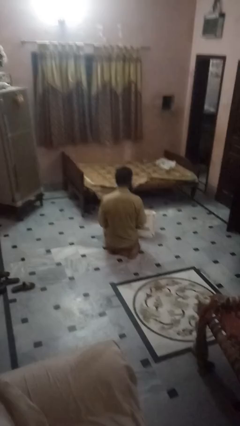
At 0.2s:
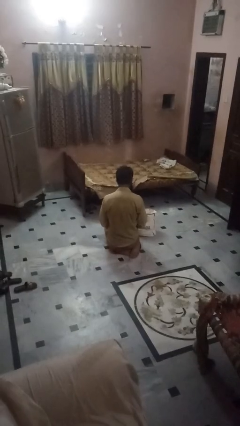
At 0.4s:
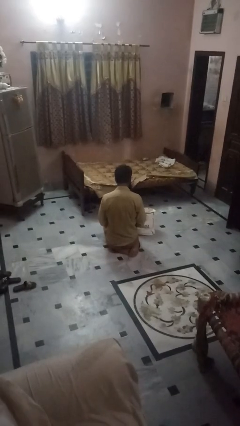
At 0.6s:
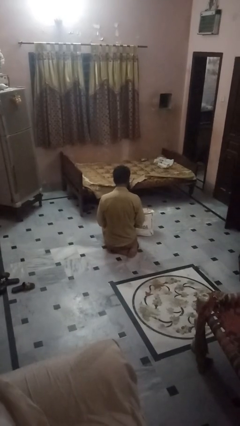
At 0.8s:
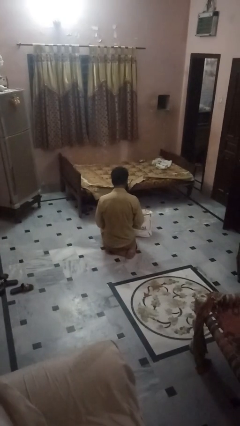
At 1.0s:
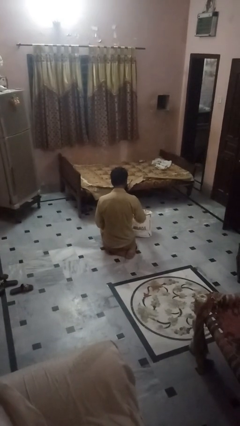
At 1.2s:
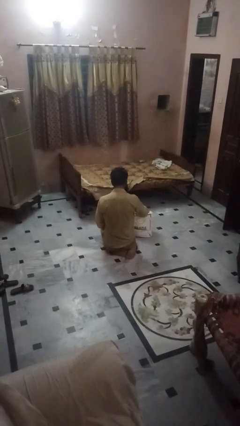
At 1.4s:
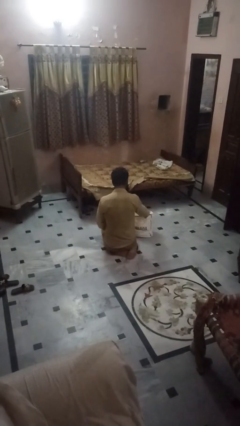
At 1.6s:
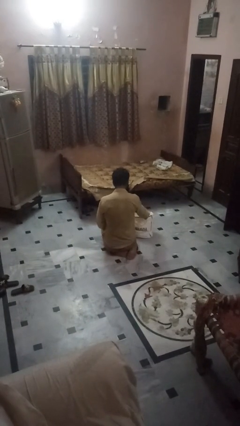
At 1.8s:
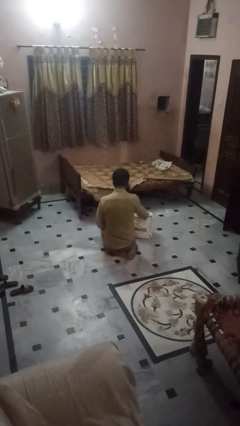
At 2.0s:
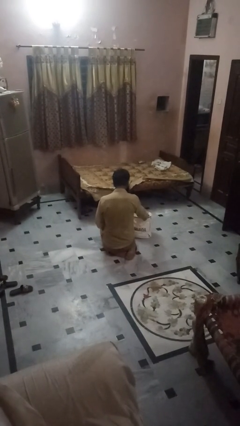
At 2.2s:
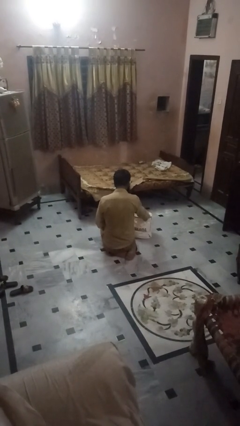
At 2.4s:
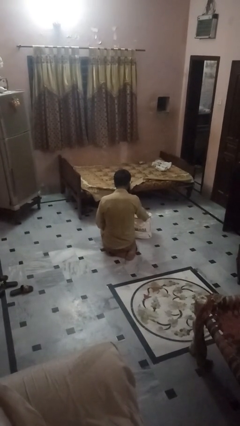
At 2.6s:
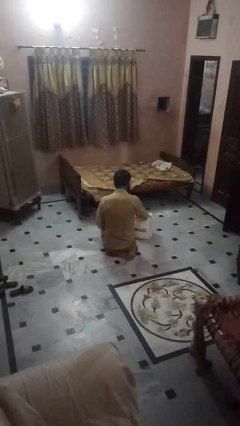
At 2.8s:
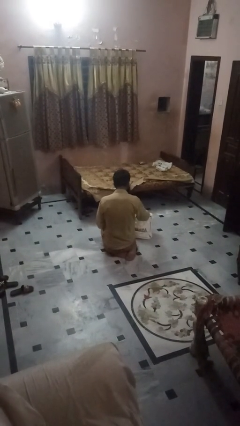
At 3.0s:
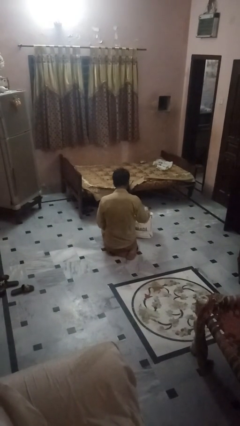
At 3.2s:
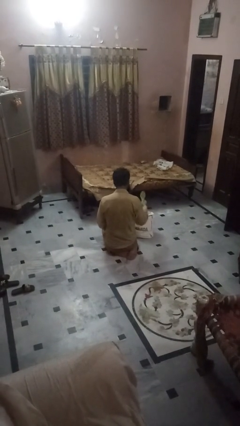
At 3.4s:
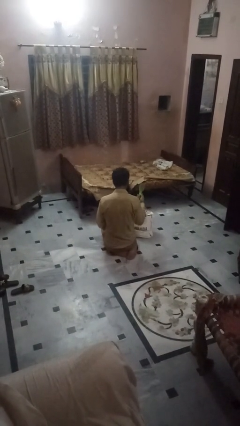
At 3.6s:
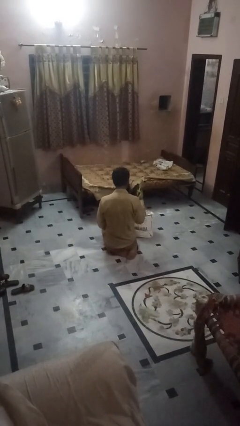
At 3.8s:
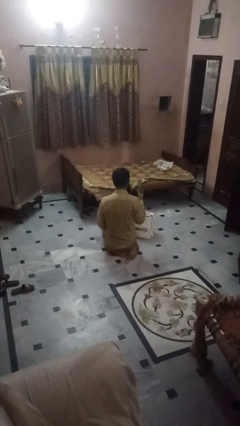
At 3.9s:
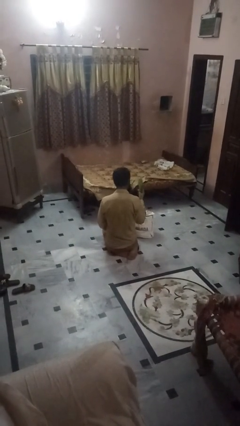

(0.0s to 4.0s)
person takes object from bag

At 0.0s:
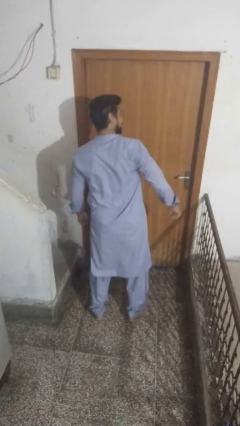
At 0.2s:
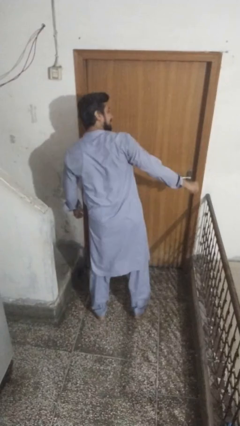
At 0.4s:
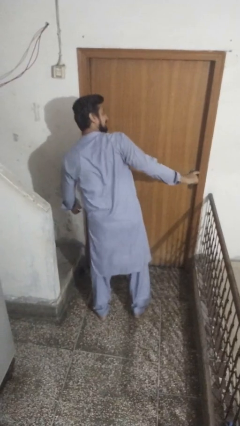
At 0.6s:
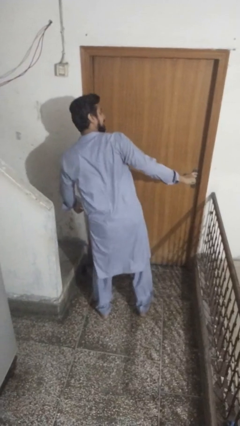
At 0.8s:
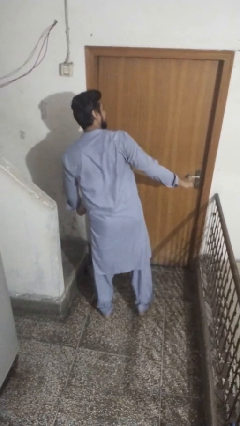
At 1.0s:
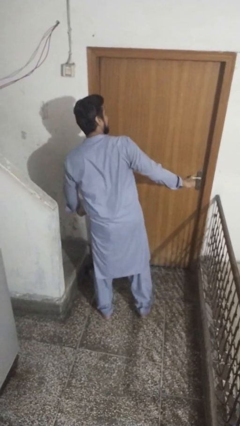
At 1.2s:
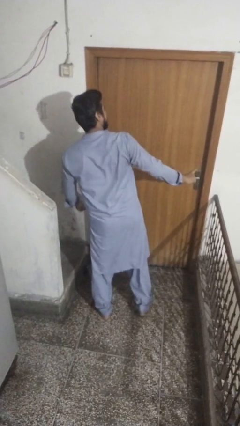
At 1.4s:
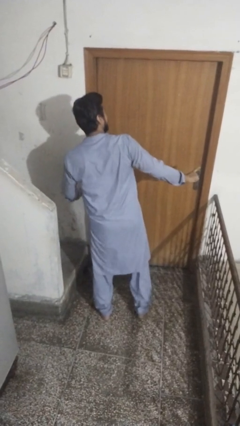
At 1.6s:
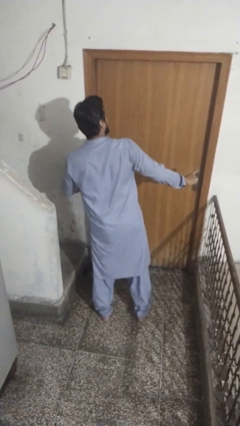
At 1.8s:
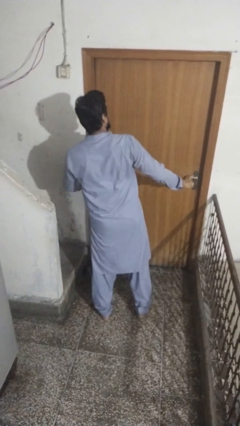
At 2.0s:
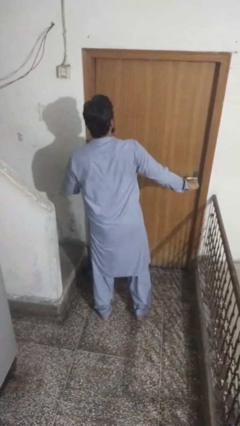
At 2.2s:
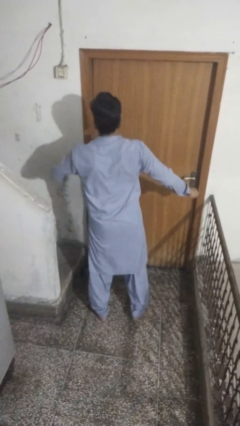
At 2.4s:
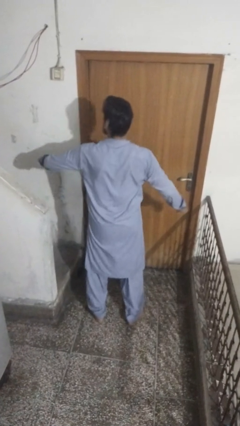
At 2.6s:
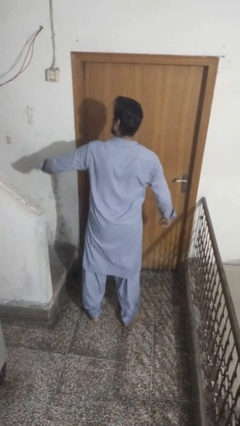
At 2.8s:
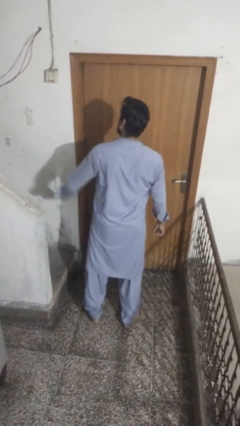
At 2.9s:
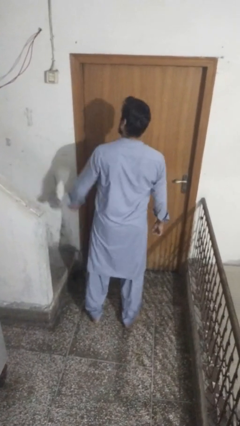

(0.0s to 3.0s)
person dances in place

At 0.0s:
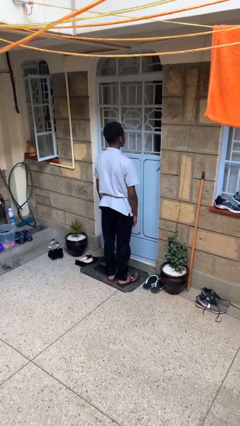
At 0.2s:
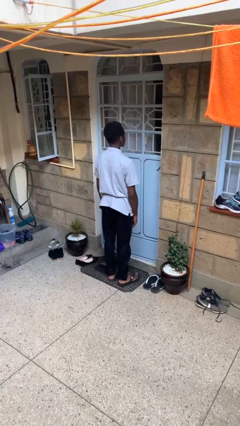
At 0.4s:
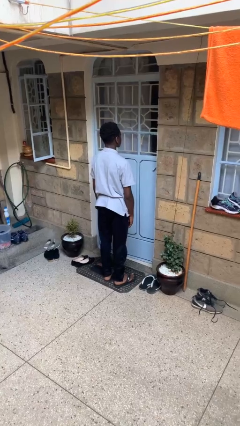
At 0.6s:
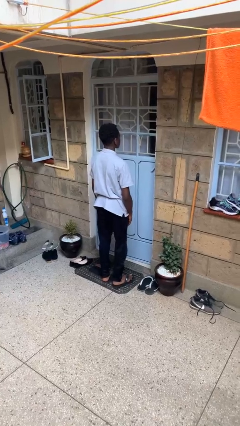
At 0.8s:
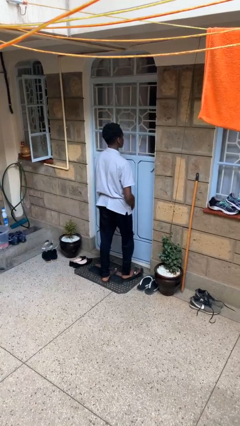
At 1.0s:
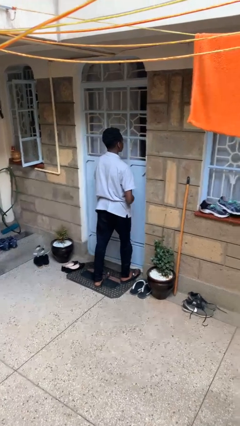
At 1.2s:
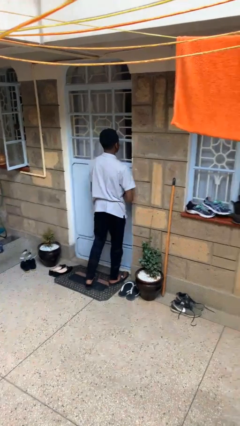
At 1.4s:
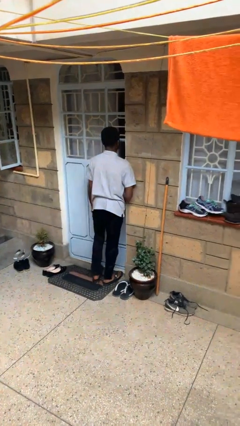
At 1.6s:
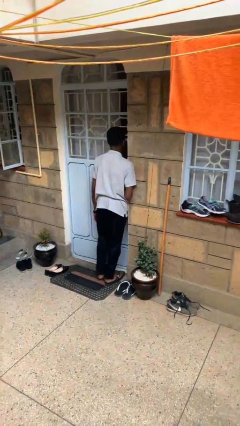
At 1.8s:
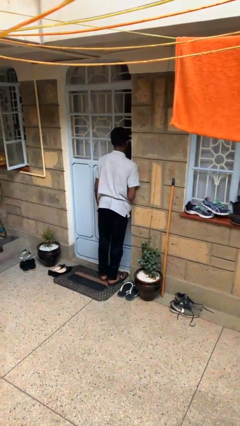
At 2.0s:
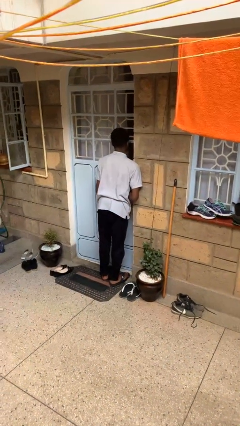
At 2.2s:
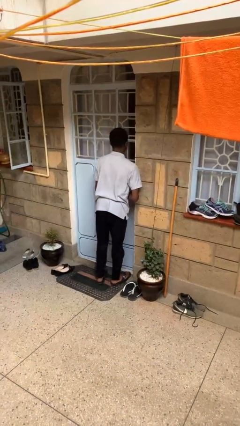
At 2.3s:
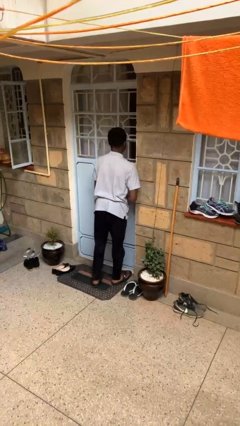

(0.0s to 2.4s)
person bumps into wall

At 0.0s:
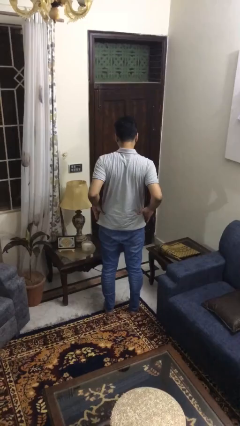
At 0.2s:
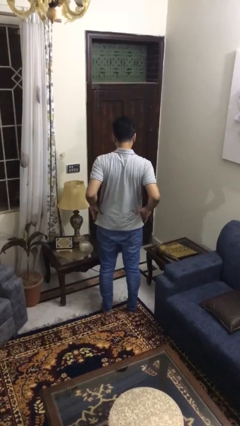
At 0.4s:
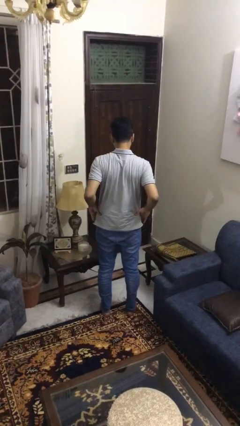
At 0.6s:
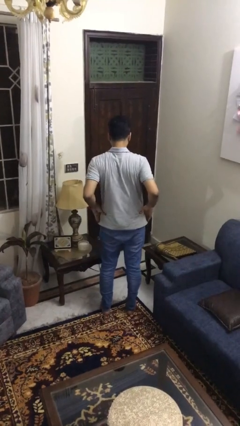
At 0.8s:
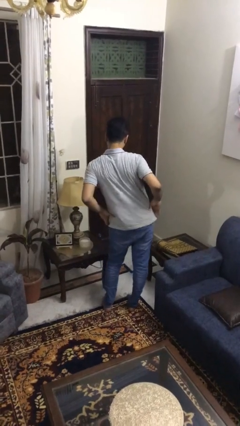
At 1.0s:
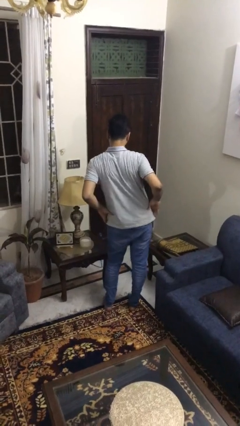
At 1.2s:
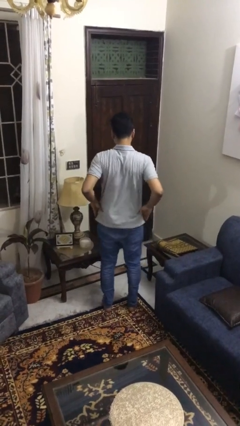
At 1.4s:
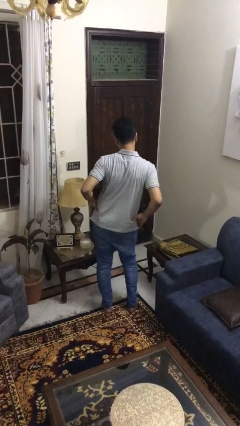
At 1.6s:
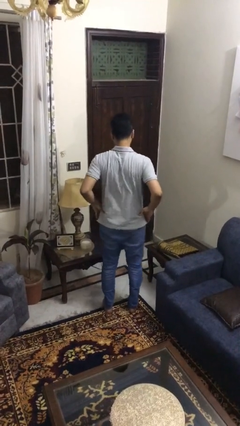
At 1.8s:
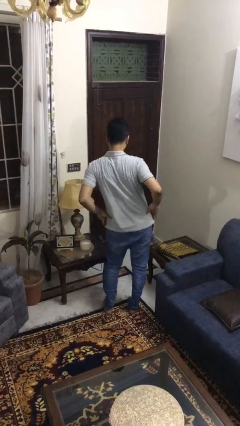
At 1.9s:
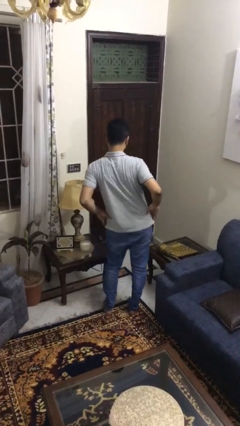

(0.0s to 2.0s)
person wiggles hips

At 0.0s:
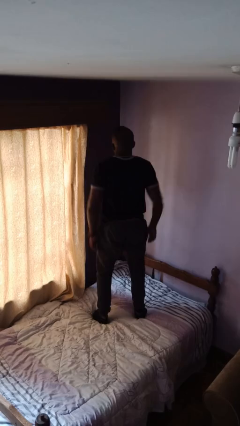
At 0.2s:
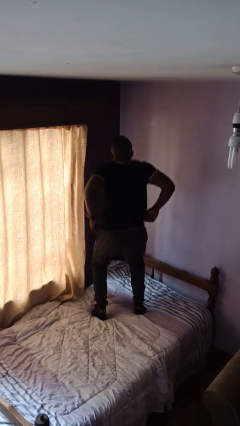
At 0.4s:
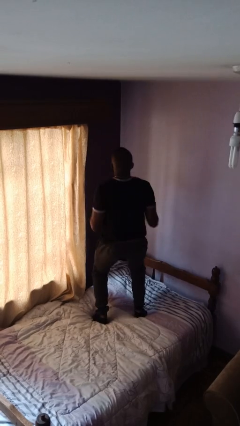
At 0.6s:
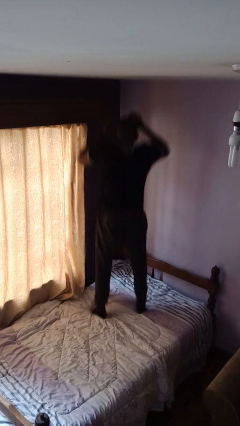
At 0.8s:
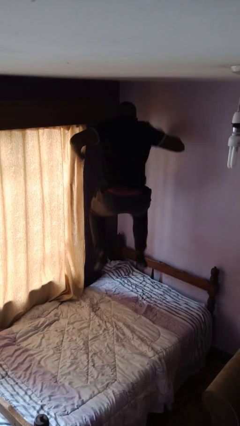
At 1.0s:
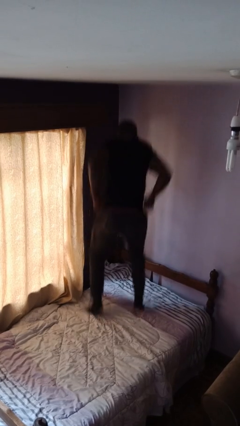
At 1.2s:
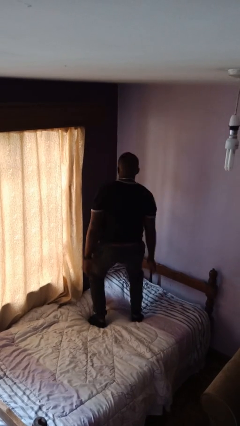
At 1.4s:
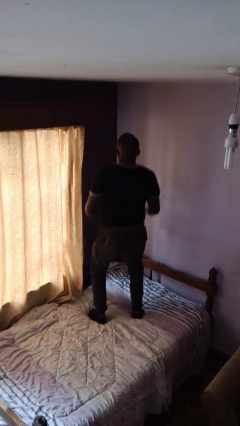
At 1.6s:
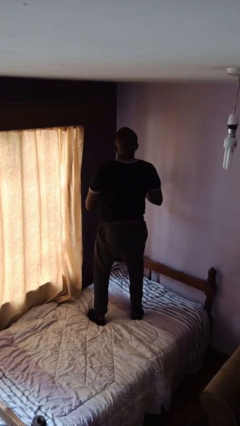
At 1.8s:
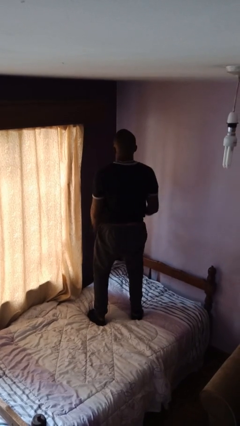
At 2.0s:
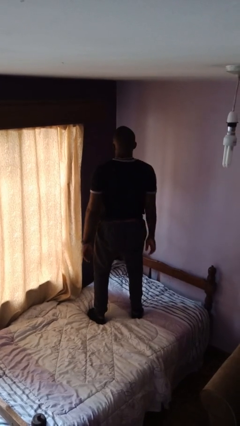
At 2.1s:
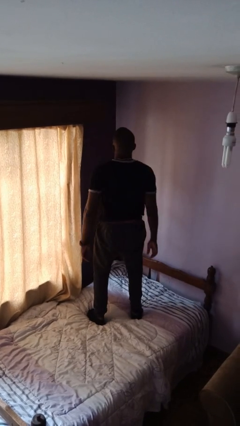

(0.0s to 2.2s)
person jumps on bed

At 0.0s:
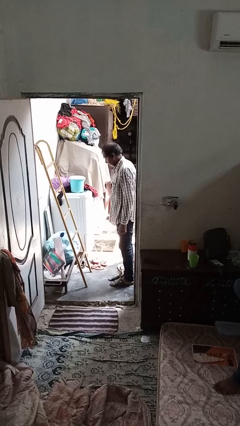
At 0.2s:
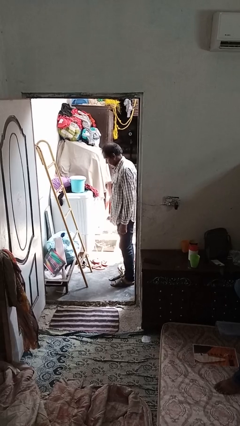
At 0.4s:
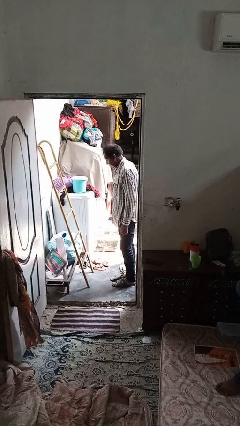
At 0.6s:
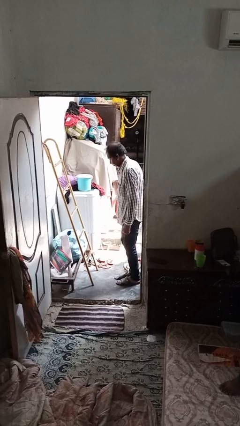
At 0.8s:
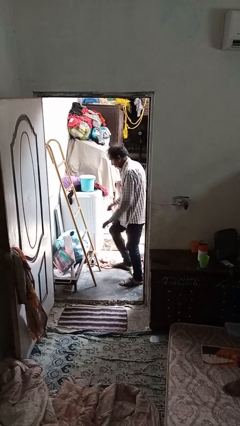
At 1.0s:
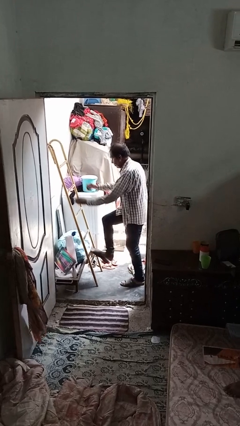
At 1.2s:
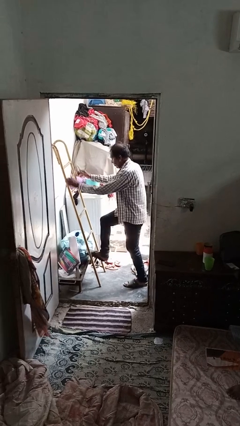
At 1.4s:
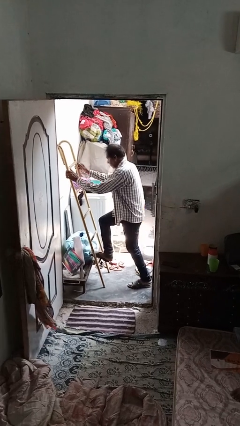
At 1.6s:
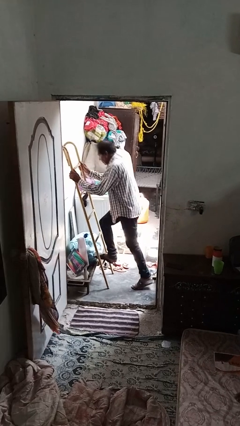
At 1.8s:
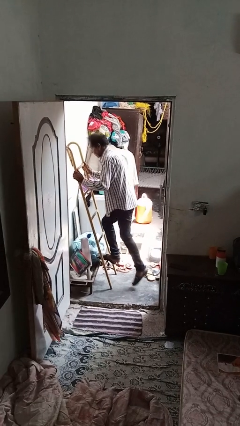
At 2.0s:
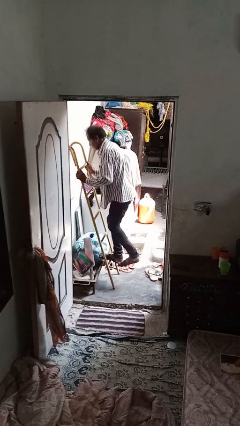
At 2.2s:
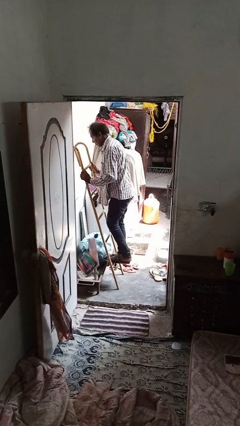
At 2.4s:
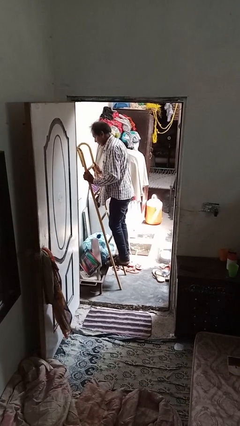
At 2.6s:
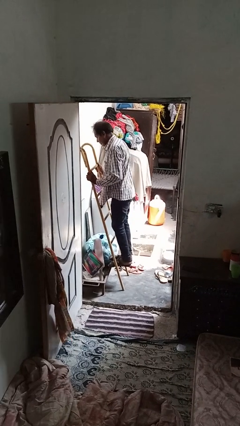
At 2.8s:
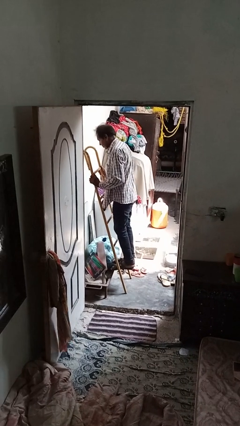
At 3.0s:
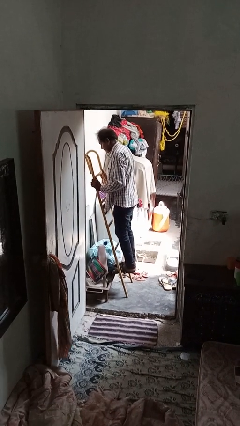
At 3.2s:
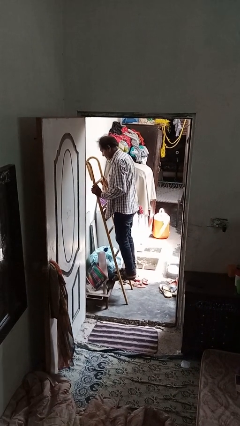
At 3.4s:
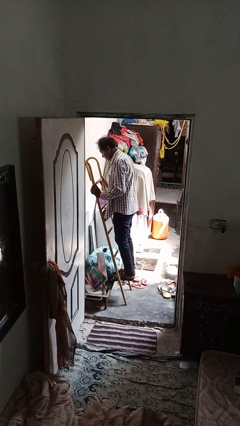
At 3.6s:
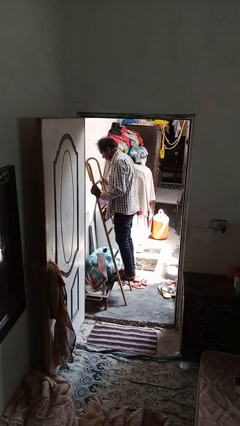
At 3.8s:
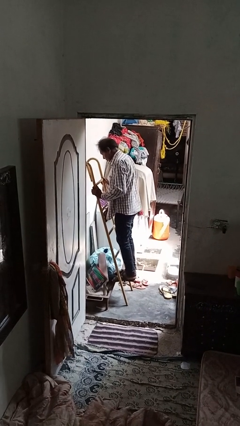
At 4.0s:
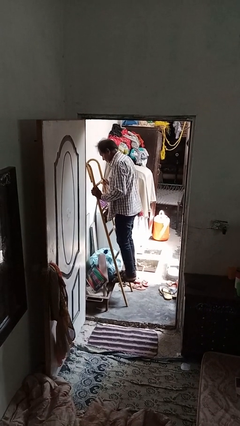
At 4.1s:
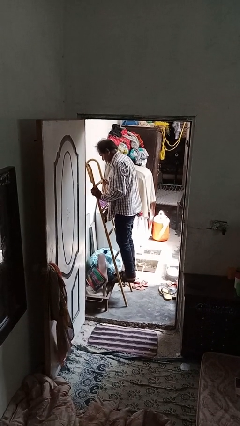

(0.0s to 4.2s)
person climbs up ladder
